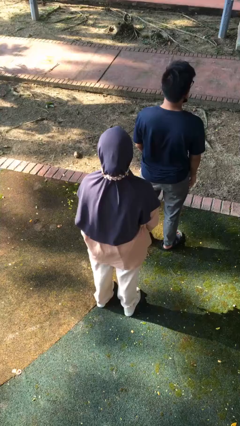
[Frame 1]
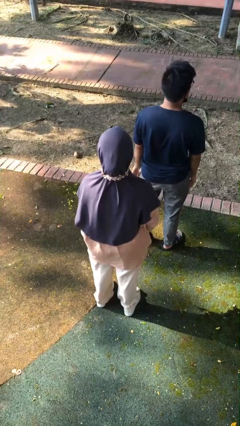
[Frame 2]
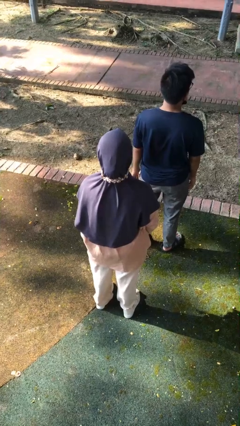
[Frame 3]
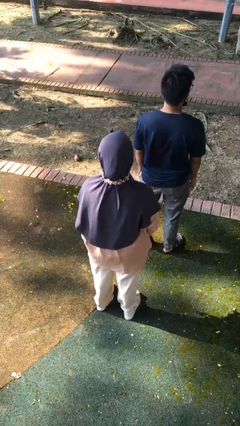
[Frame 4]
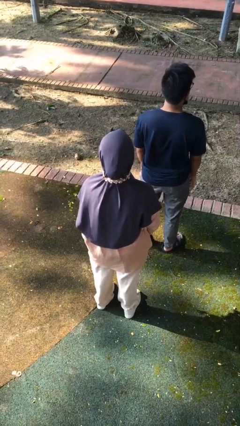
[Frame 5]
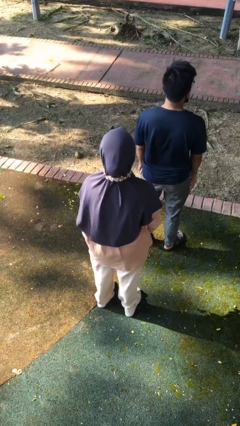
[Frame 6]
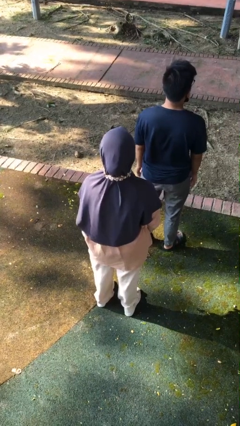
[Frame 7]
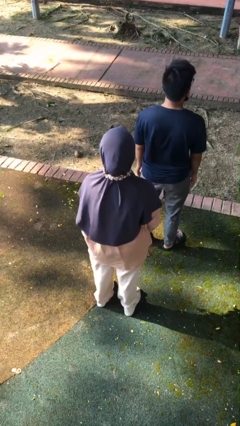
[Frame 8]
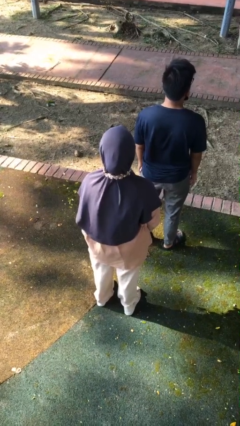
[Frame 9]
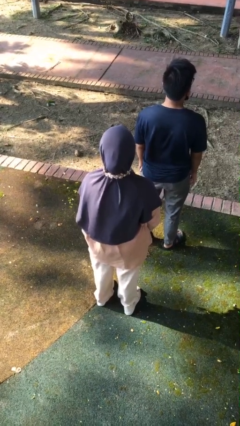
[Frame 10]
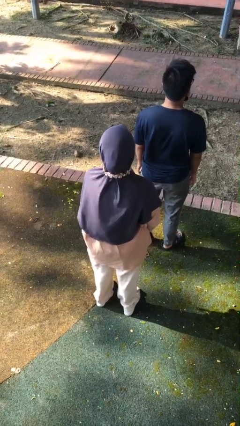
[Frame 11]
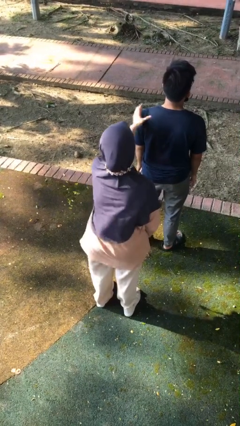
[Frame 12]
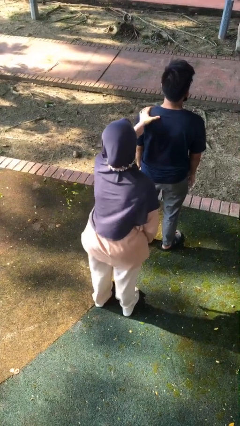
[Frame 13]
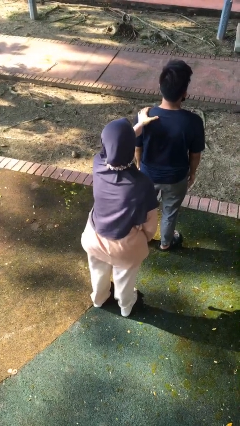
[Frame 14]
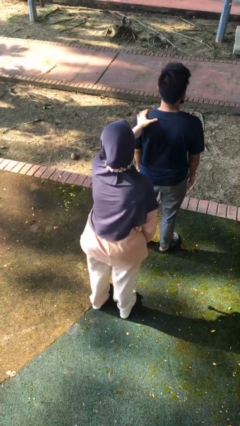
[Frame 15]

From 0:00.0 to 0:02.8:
person grabs person by shoulder

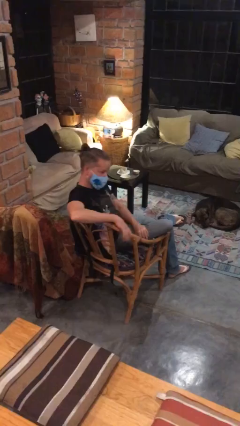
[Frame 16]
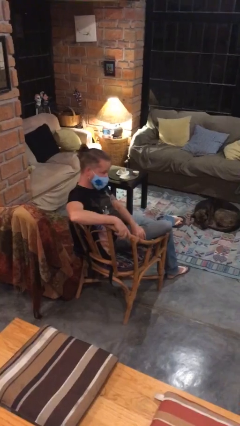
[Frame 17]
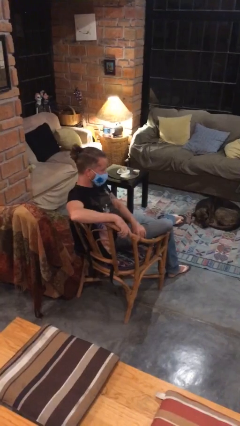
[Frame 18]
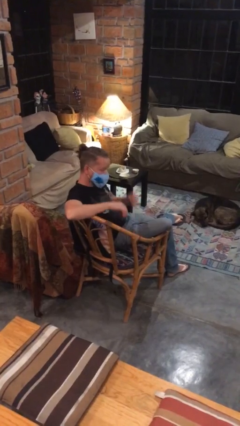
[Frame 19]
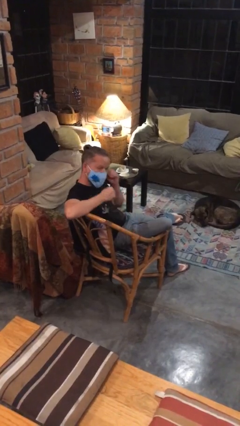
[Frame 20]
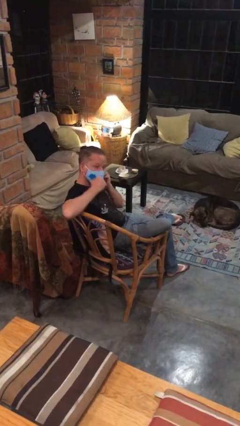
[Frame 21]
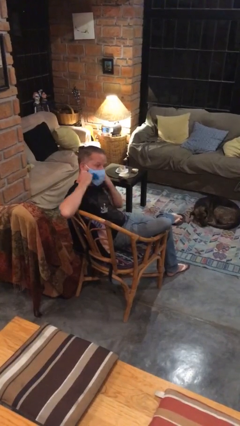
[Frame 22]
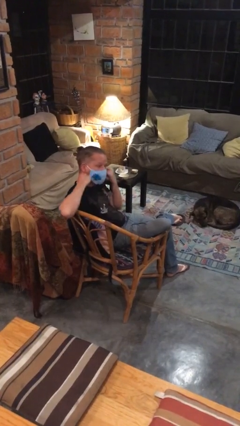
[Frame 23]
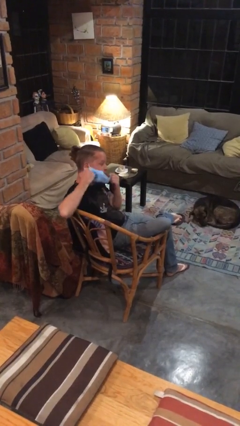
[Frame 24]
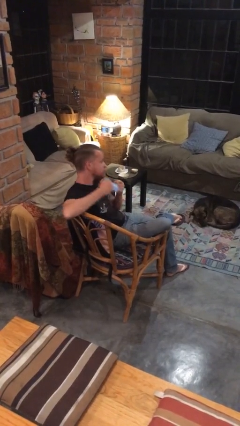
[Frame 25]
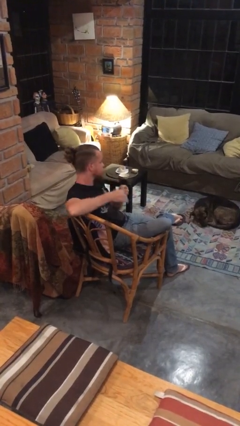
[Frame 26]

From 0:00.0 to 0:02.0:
person takes off facemask

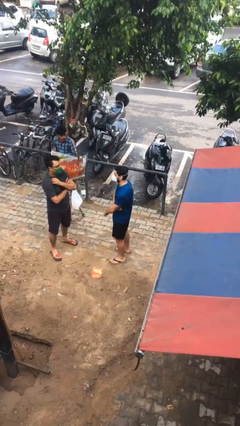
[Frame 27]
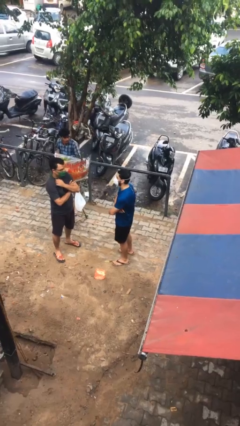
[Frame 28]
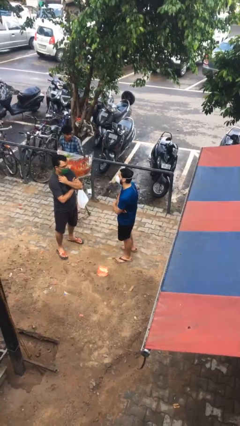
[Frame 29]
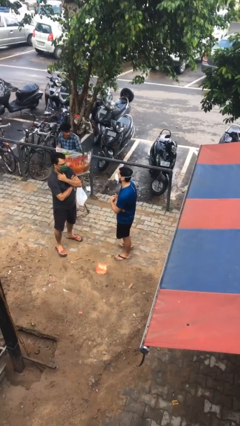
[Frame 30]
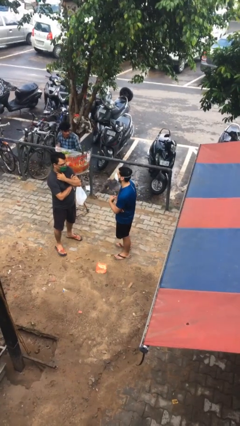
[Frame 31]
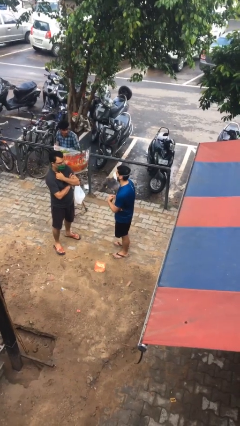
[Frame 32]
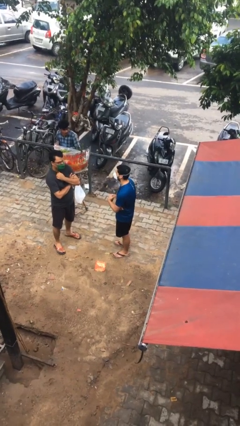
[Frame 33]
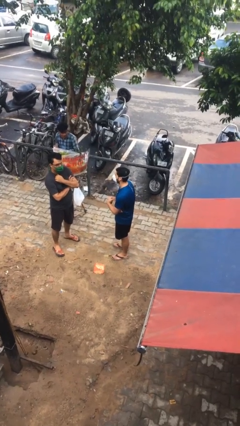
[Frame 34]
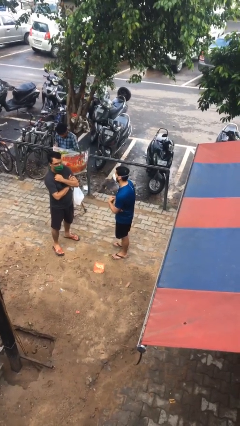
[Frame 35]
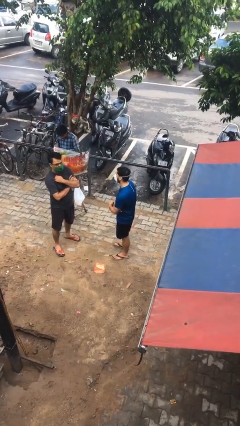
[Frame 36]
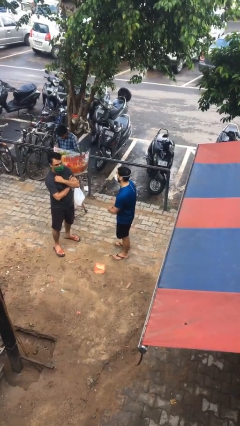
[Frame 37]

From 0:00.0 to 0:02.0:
person talks to person

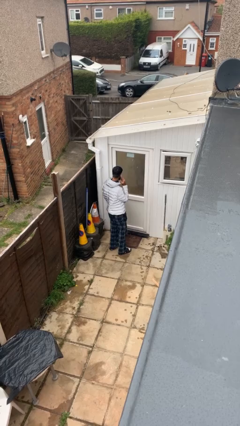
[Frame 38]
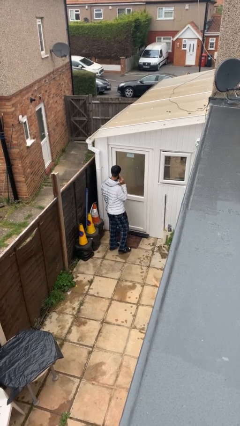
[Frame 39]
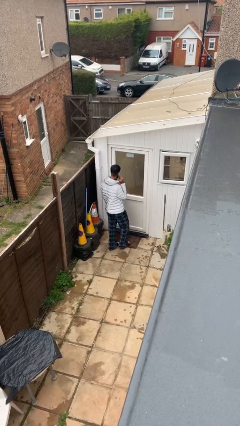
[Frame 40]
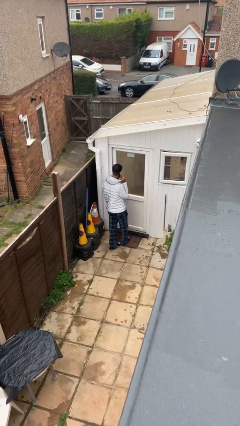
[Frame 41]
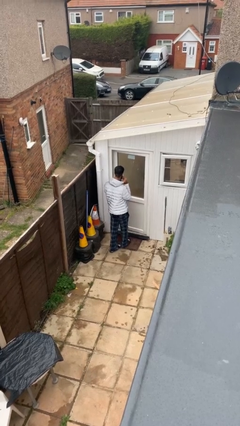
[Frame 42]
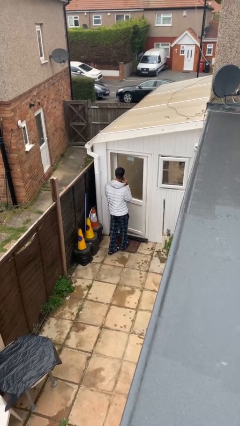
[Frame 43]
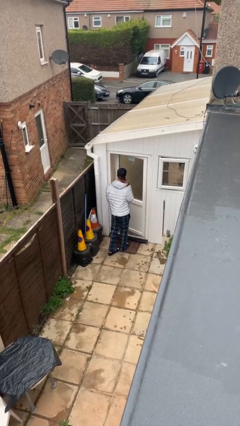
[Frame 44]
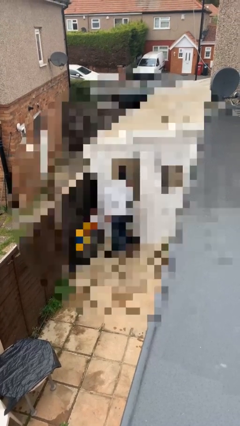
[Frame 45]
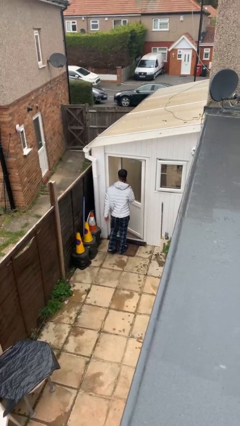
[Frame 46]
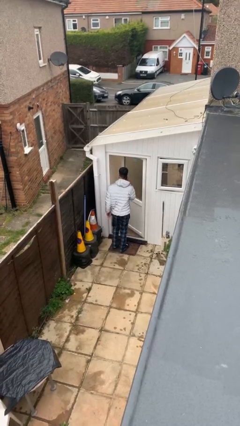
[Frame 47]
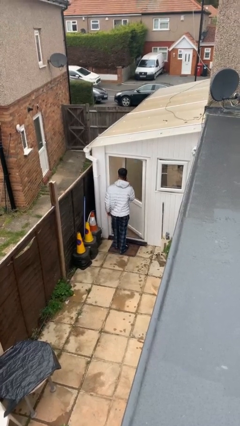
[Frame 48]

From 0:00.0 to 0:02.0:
person opens facility door

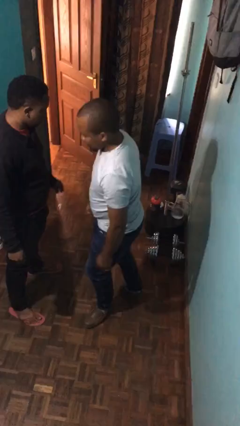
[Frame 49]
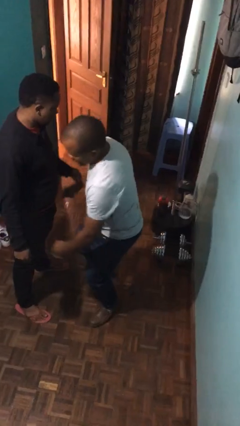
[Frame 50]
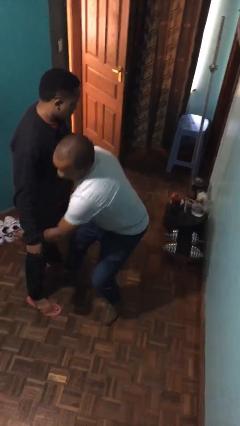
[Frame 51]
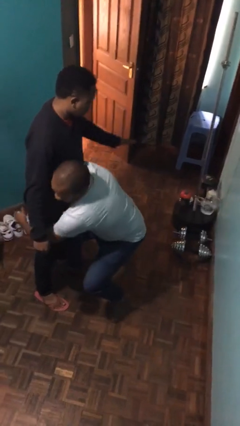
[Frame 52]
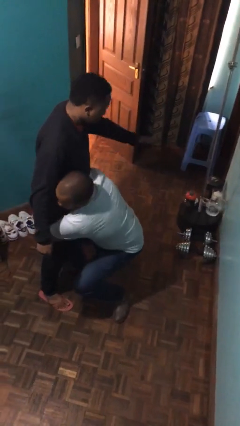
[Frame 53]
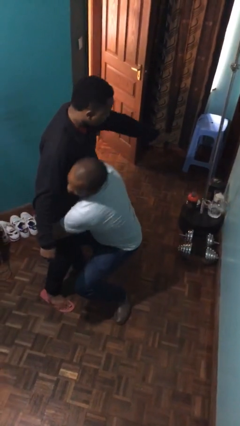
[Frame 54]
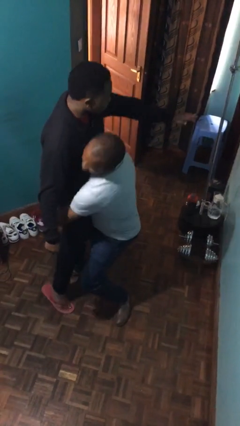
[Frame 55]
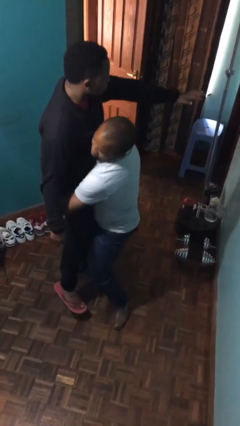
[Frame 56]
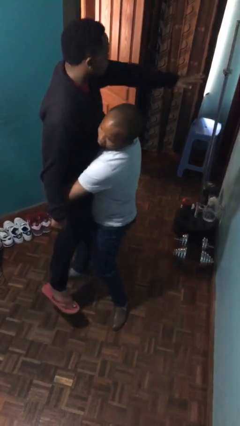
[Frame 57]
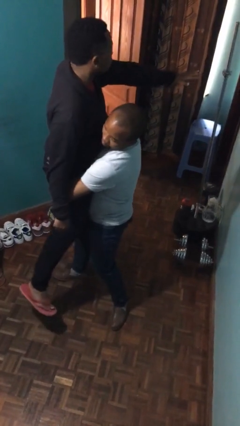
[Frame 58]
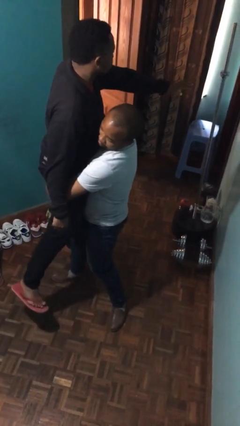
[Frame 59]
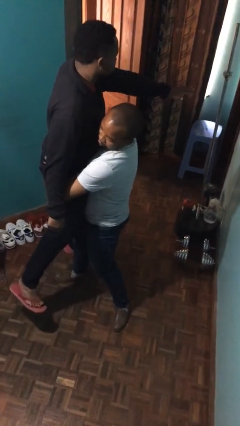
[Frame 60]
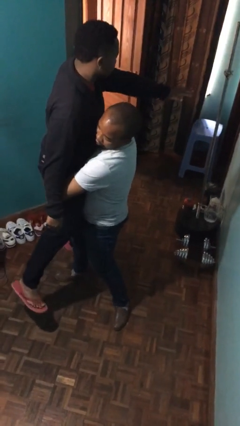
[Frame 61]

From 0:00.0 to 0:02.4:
person picks up person

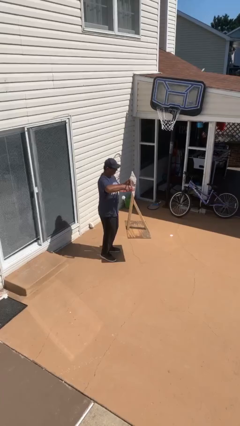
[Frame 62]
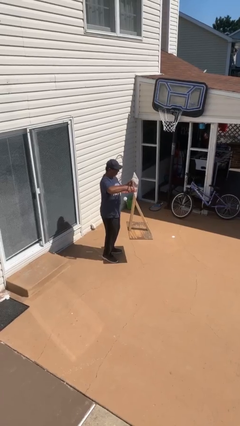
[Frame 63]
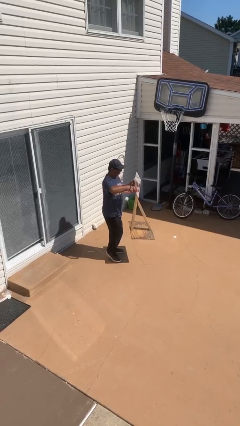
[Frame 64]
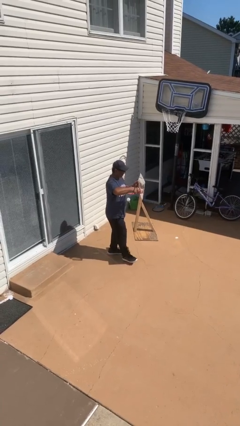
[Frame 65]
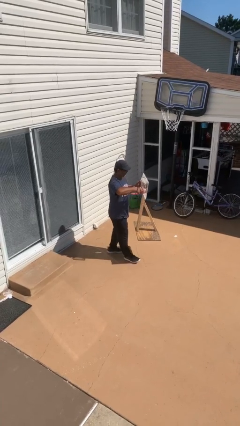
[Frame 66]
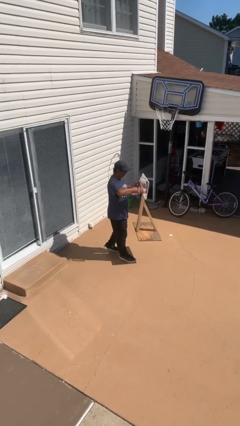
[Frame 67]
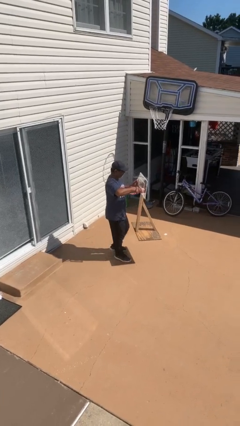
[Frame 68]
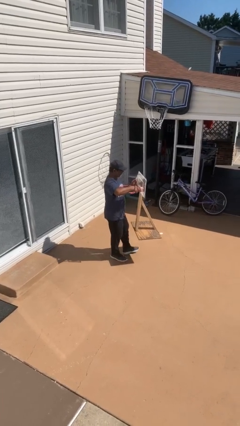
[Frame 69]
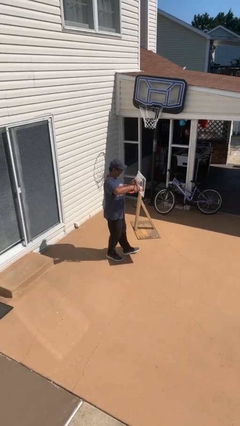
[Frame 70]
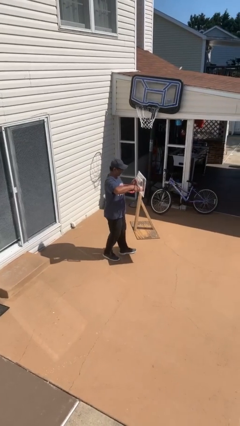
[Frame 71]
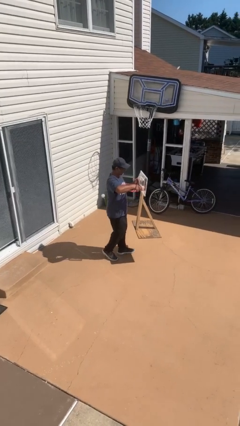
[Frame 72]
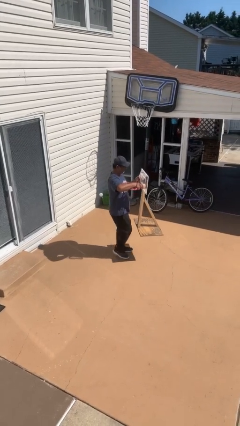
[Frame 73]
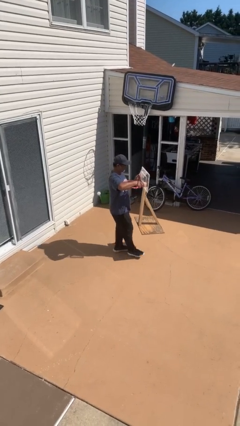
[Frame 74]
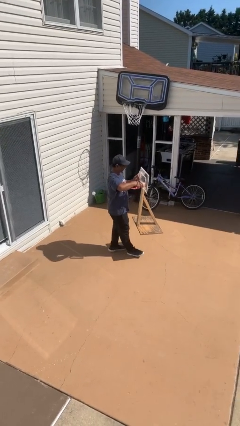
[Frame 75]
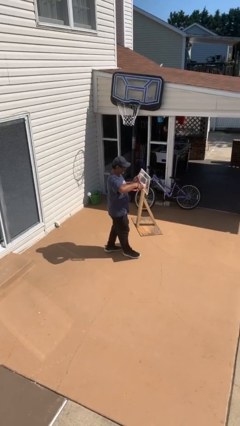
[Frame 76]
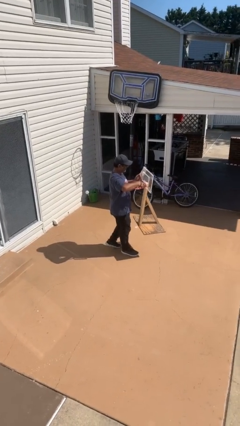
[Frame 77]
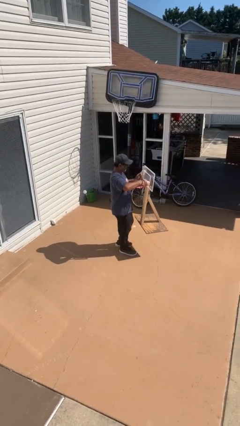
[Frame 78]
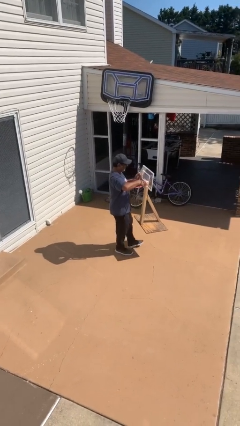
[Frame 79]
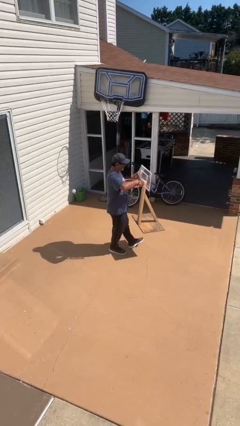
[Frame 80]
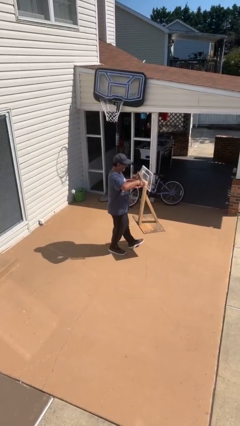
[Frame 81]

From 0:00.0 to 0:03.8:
person carries heavy object

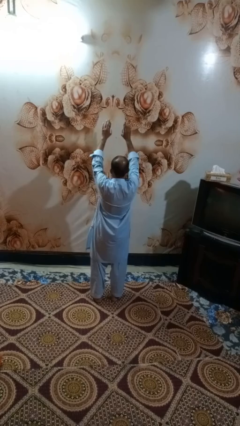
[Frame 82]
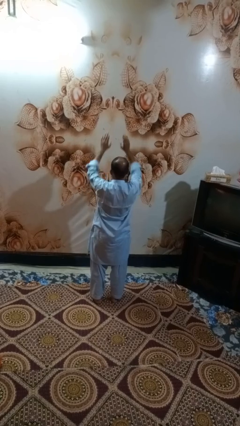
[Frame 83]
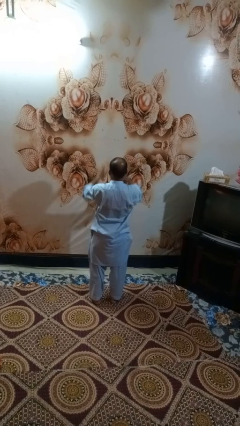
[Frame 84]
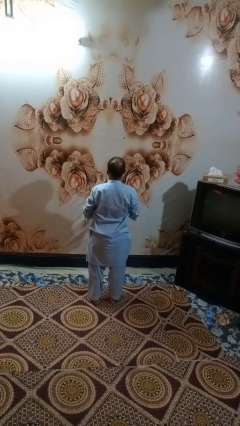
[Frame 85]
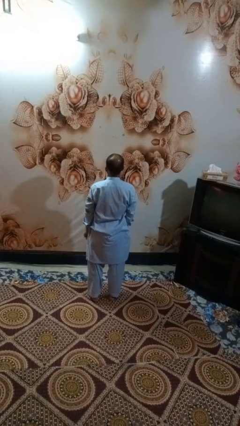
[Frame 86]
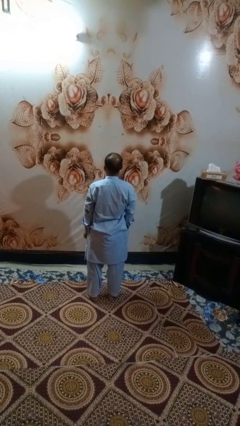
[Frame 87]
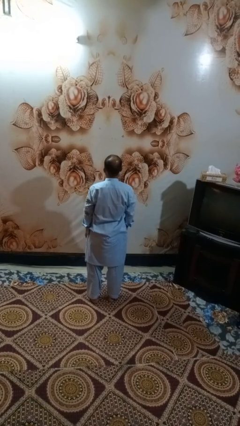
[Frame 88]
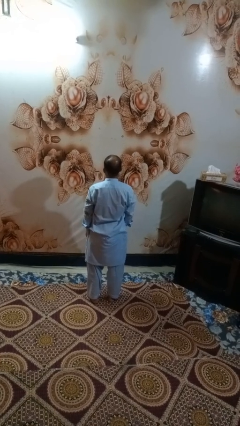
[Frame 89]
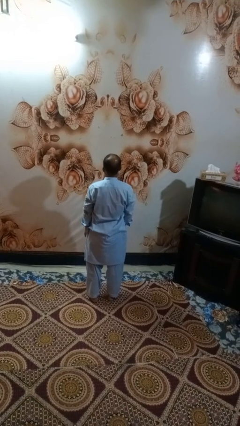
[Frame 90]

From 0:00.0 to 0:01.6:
person gestures swipe down

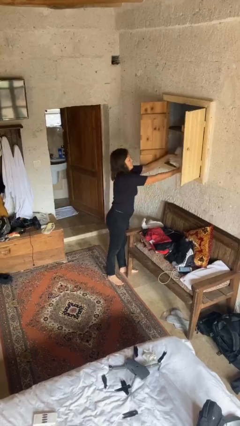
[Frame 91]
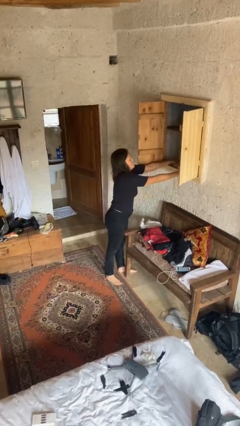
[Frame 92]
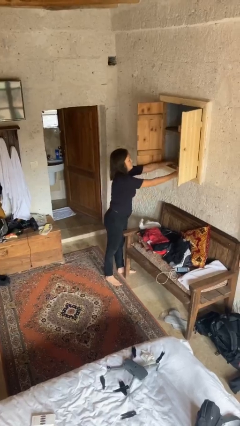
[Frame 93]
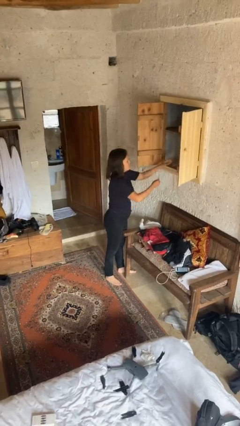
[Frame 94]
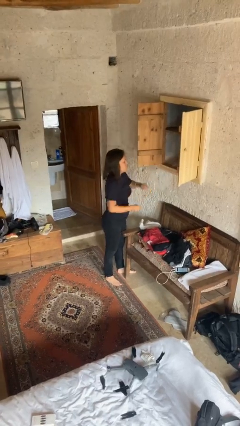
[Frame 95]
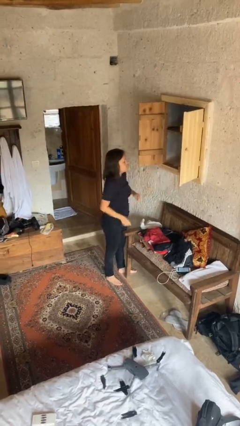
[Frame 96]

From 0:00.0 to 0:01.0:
person puts clothes into dresser
